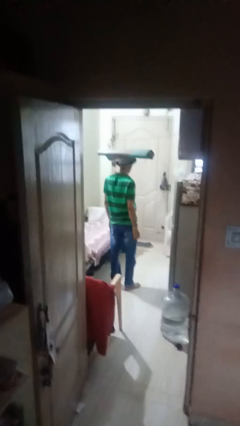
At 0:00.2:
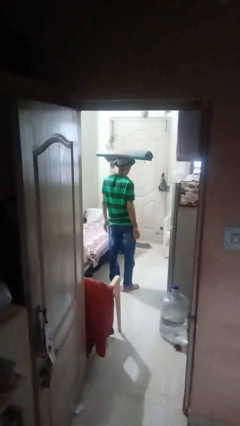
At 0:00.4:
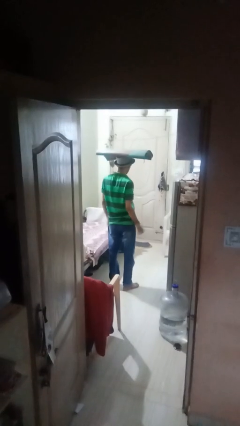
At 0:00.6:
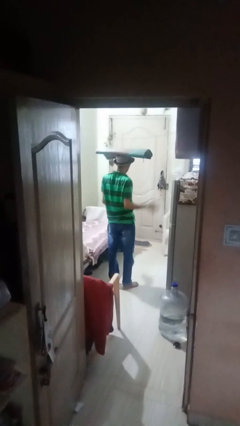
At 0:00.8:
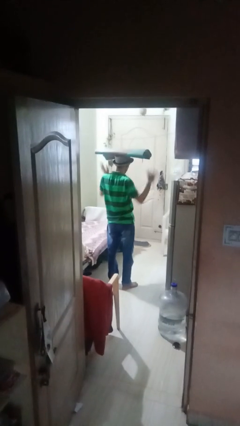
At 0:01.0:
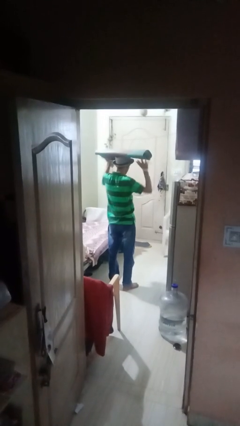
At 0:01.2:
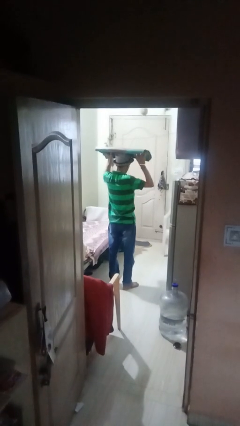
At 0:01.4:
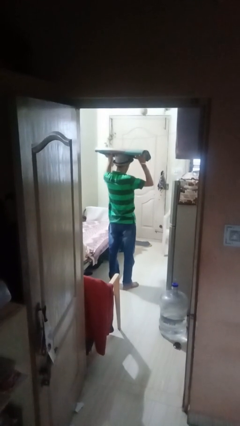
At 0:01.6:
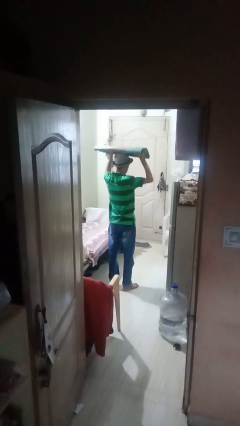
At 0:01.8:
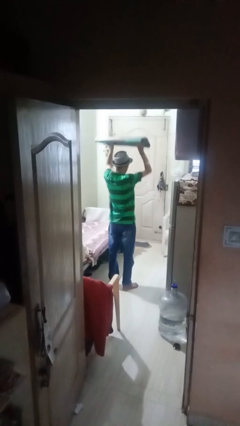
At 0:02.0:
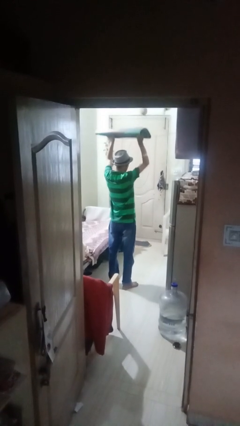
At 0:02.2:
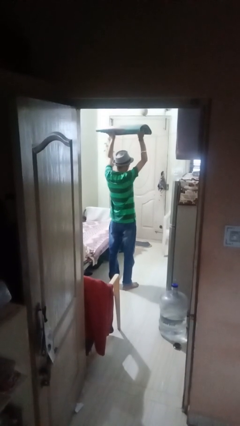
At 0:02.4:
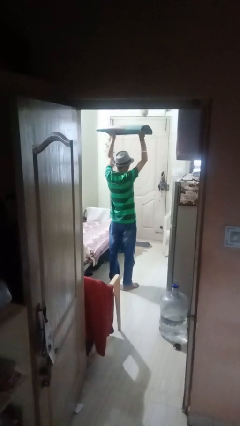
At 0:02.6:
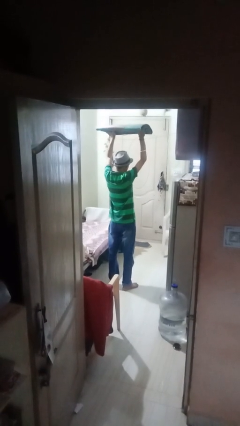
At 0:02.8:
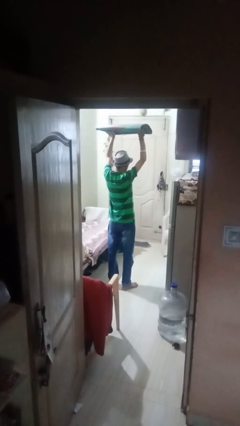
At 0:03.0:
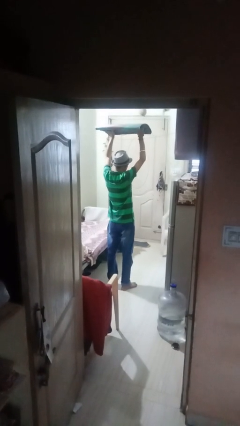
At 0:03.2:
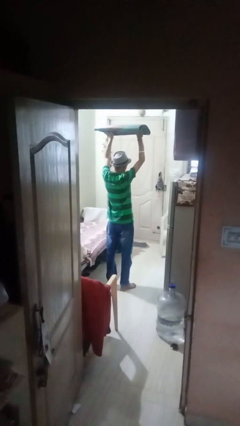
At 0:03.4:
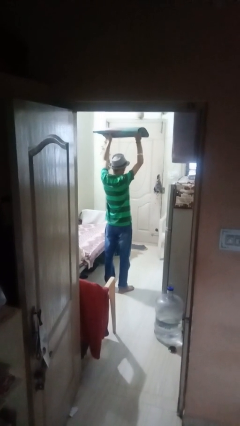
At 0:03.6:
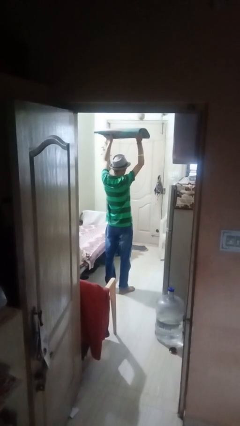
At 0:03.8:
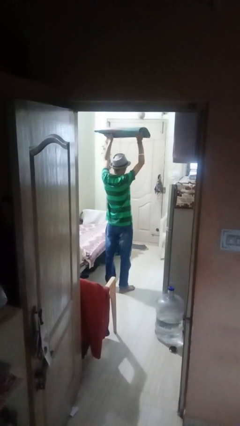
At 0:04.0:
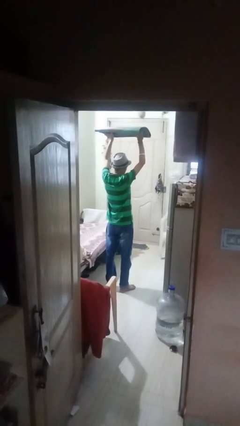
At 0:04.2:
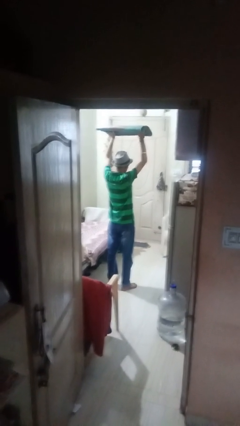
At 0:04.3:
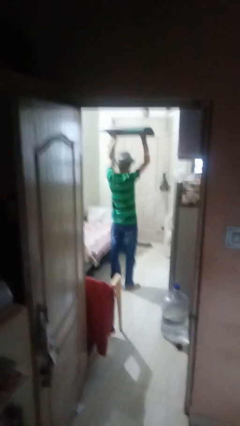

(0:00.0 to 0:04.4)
person holds object above head

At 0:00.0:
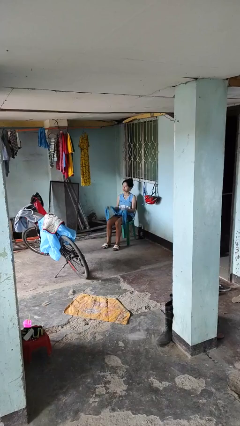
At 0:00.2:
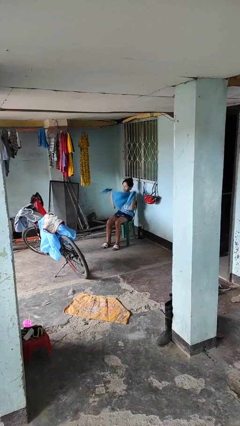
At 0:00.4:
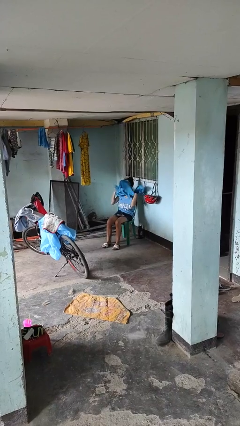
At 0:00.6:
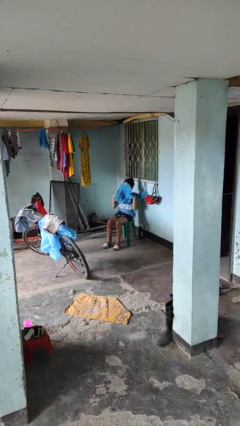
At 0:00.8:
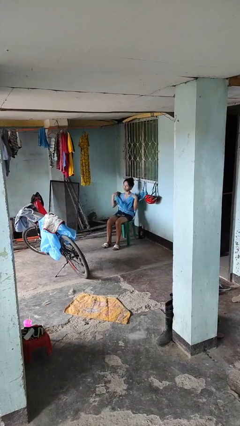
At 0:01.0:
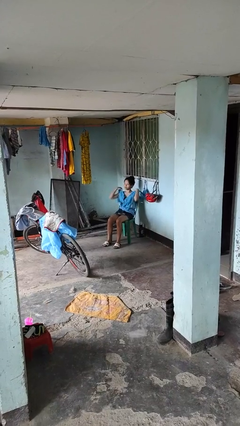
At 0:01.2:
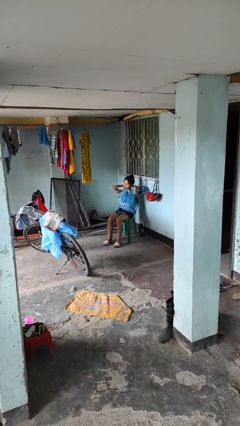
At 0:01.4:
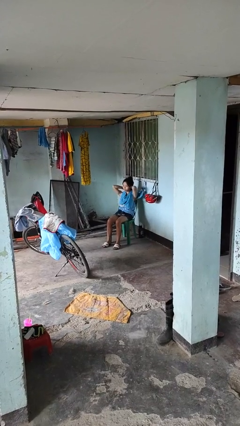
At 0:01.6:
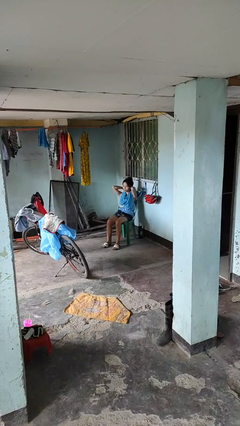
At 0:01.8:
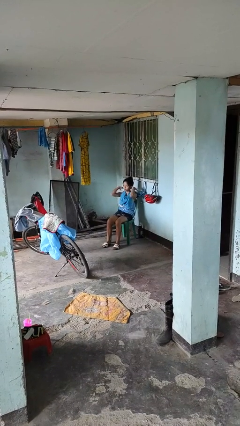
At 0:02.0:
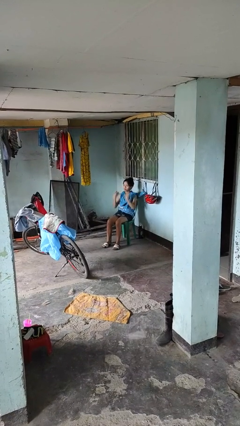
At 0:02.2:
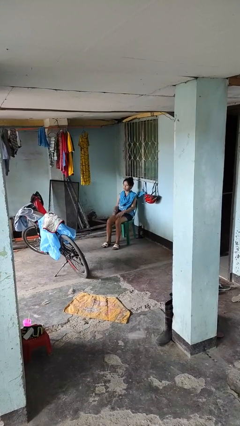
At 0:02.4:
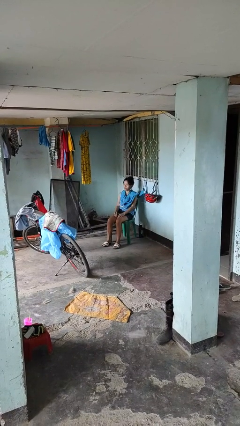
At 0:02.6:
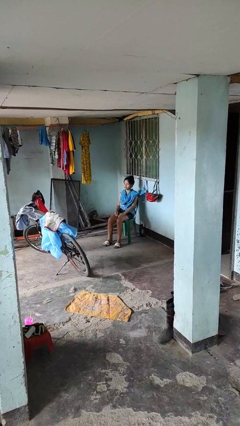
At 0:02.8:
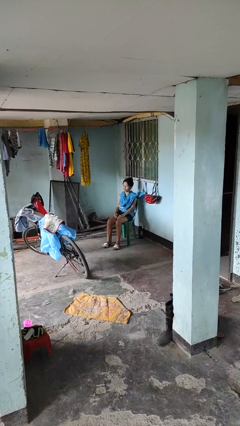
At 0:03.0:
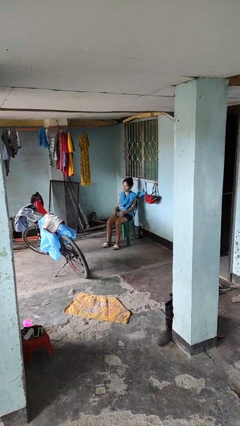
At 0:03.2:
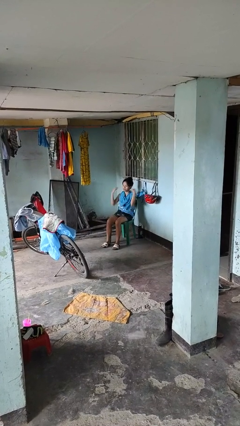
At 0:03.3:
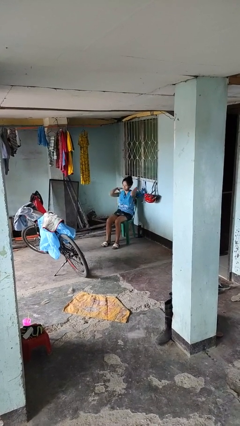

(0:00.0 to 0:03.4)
person puts on scarf

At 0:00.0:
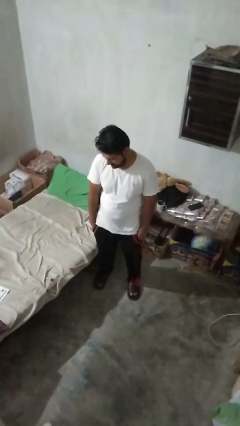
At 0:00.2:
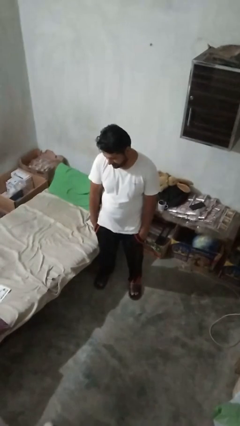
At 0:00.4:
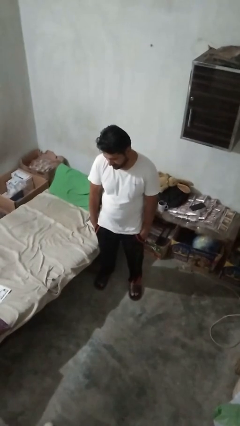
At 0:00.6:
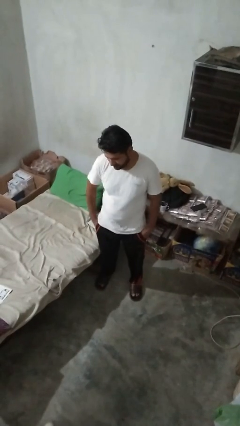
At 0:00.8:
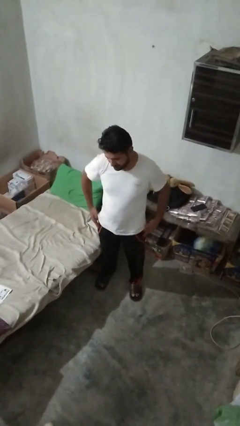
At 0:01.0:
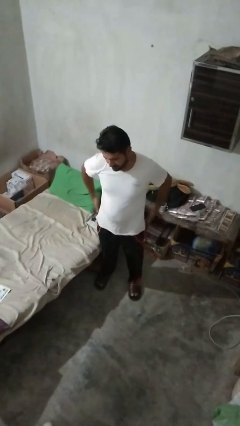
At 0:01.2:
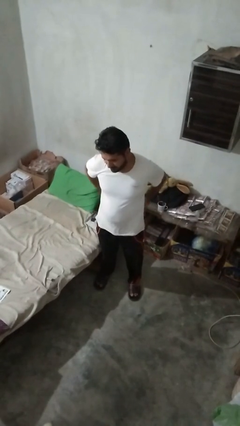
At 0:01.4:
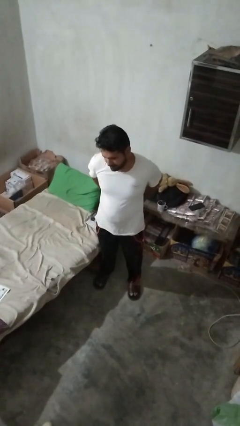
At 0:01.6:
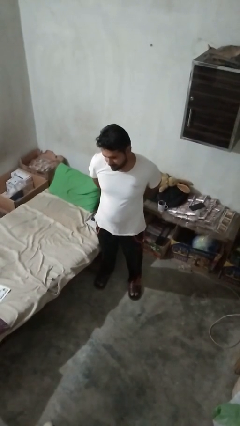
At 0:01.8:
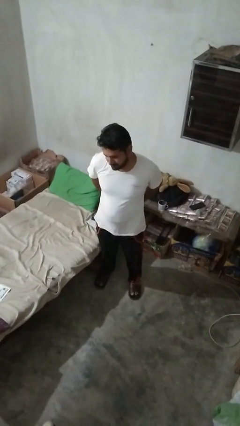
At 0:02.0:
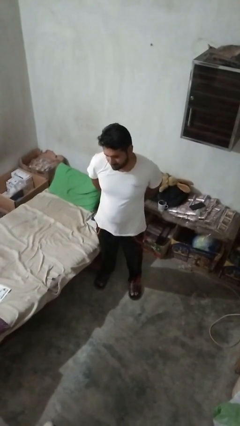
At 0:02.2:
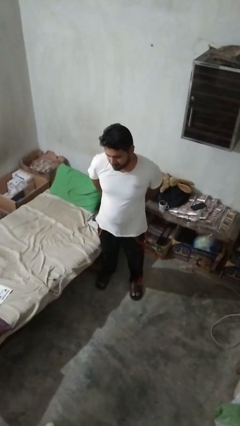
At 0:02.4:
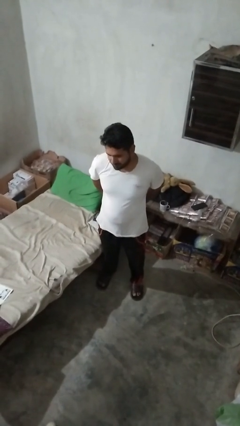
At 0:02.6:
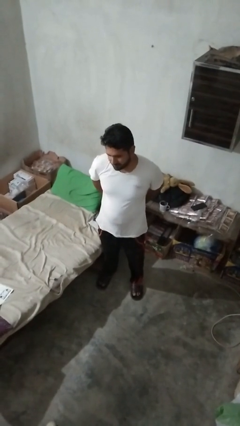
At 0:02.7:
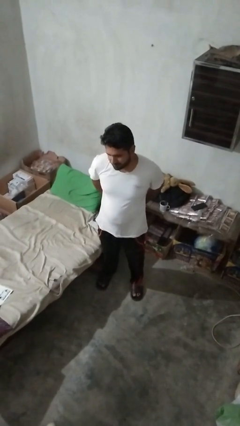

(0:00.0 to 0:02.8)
person puts hands in back pockets

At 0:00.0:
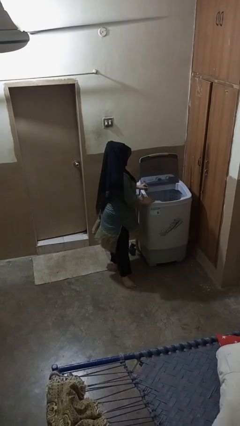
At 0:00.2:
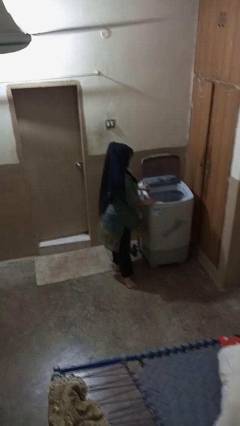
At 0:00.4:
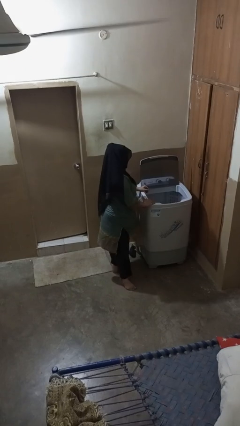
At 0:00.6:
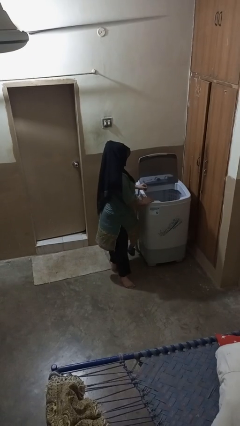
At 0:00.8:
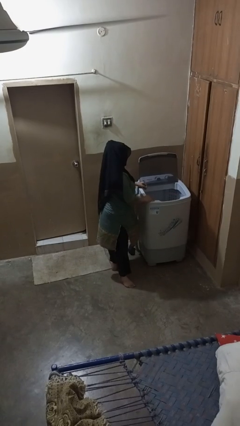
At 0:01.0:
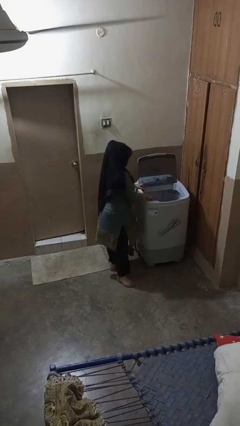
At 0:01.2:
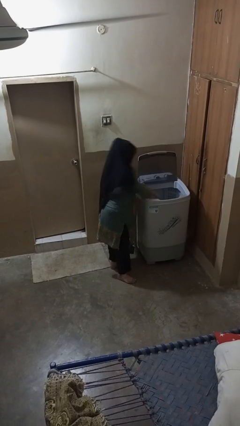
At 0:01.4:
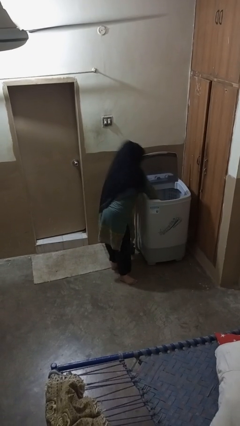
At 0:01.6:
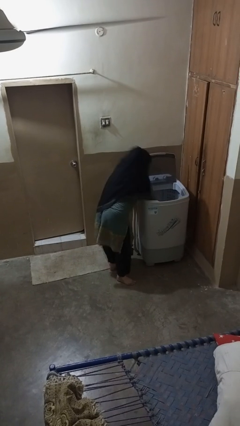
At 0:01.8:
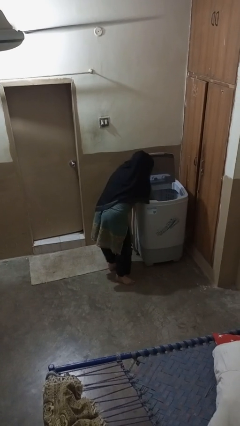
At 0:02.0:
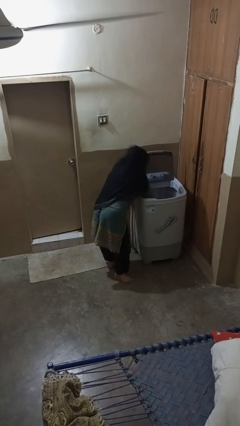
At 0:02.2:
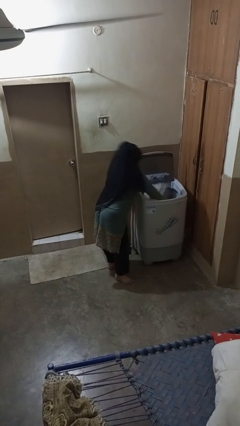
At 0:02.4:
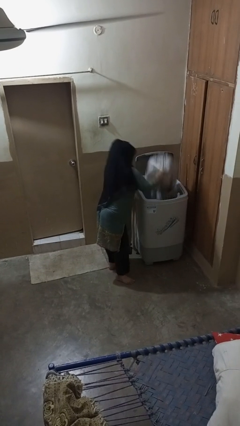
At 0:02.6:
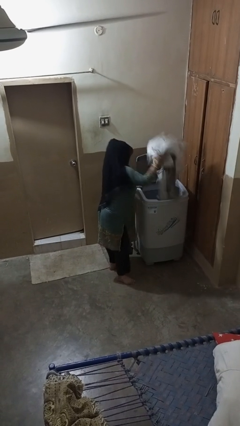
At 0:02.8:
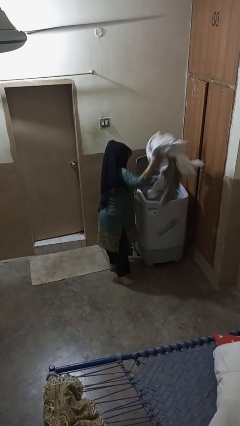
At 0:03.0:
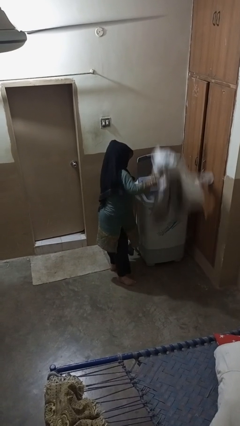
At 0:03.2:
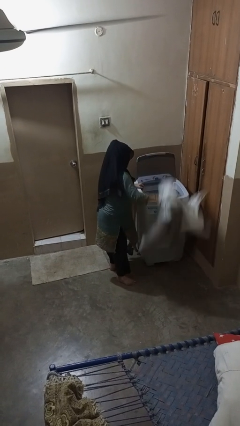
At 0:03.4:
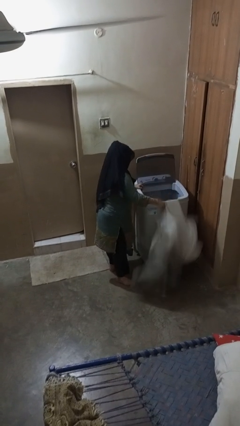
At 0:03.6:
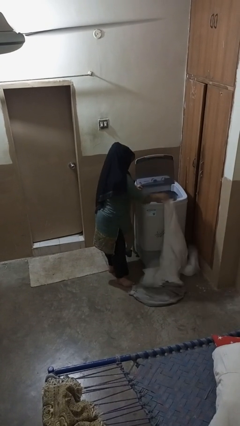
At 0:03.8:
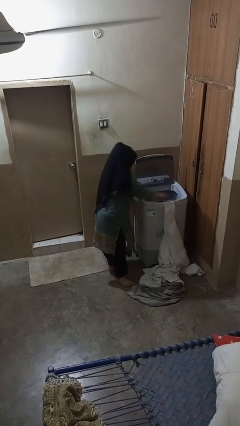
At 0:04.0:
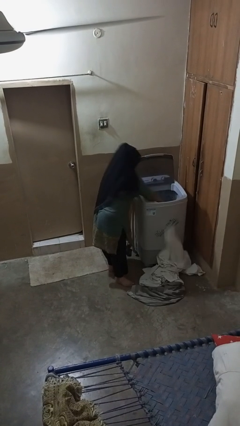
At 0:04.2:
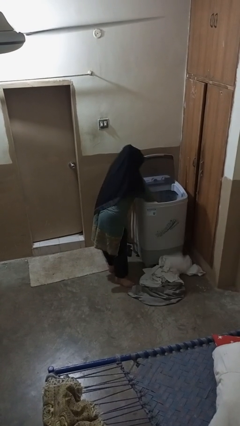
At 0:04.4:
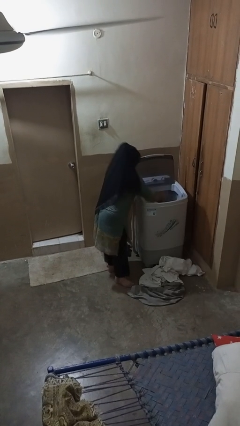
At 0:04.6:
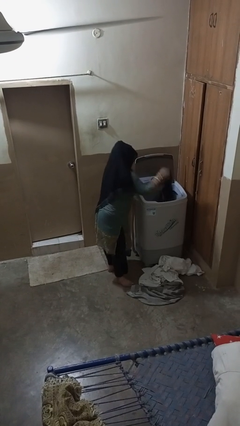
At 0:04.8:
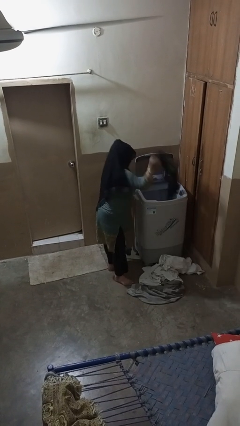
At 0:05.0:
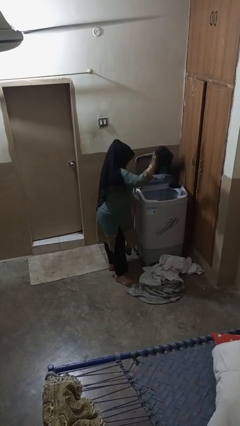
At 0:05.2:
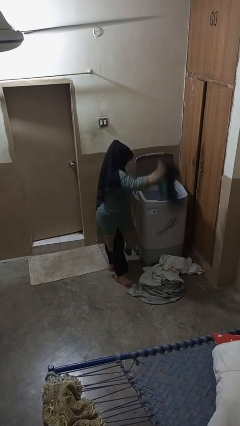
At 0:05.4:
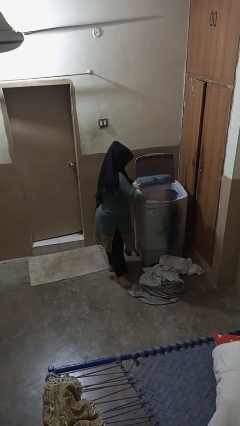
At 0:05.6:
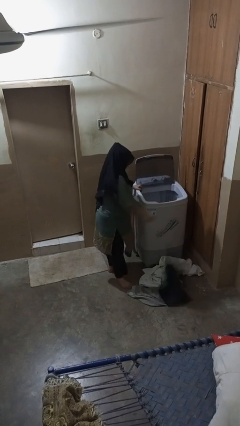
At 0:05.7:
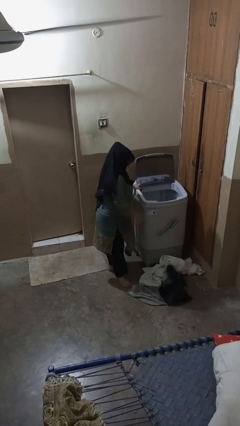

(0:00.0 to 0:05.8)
person unloads clotheswasher

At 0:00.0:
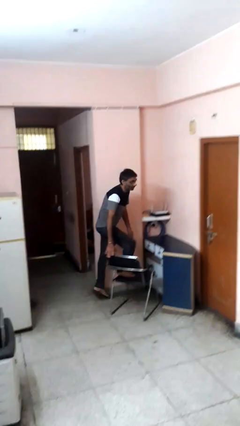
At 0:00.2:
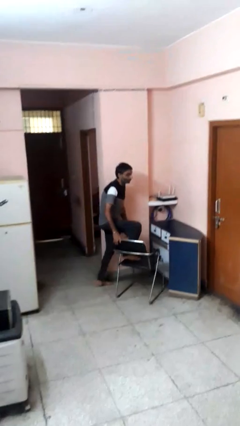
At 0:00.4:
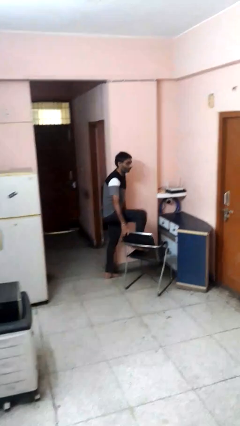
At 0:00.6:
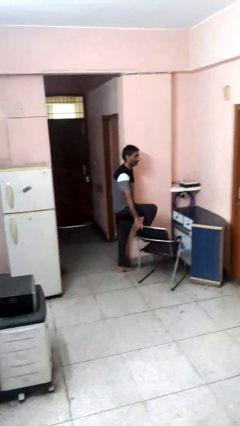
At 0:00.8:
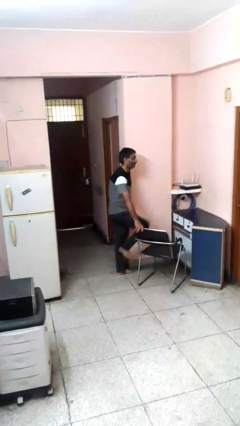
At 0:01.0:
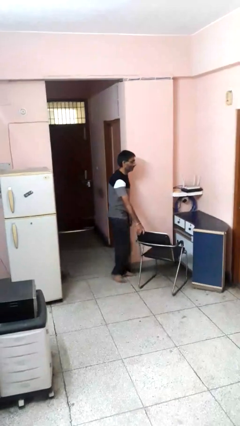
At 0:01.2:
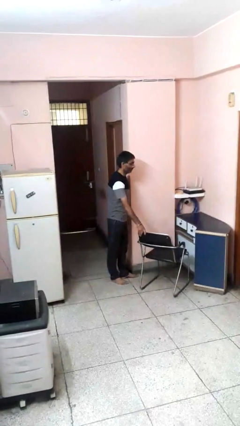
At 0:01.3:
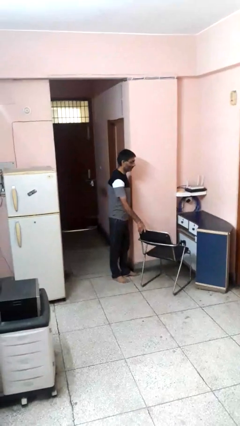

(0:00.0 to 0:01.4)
person climbs off chair
